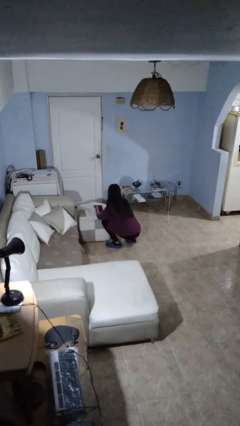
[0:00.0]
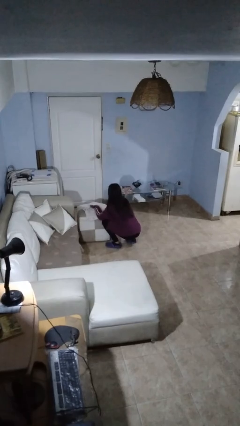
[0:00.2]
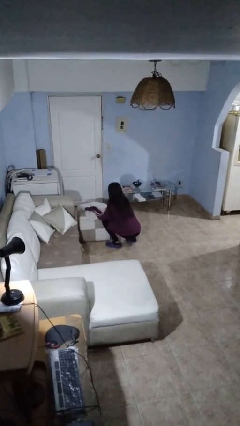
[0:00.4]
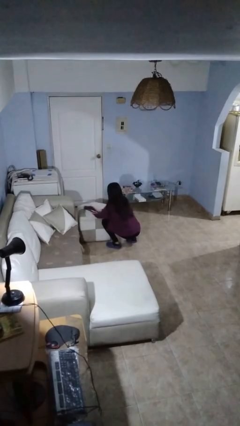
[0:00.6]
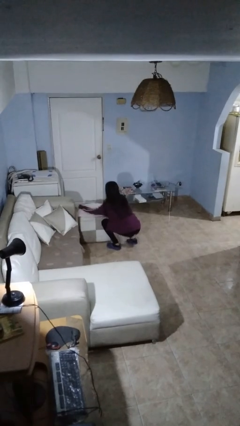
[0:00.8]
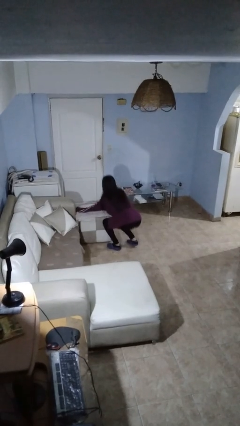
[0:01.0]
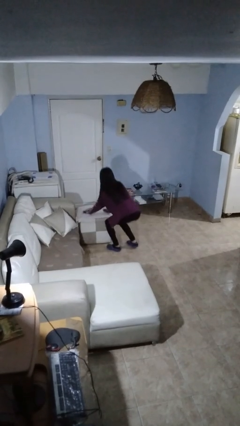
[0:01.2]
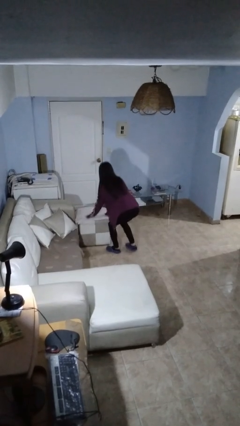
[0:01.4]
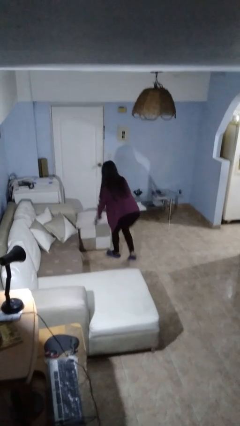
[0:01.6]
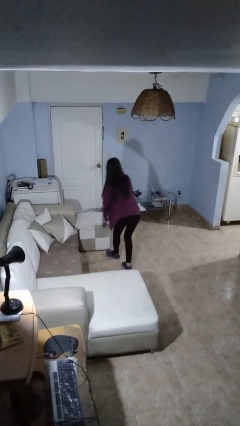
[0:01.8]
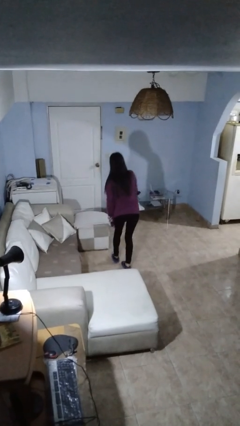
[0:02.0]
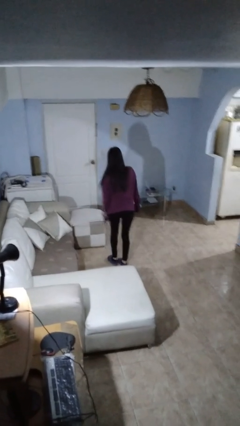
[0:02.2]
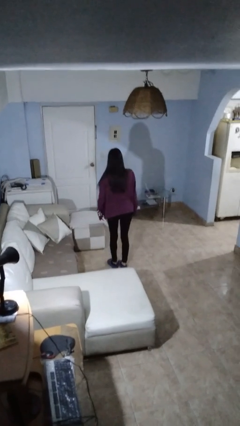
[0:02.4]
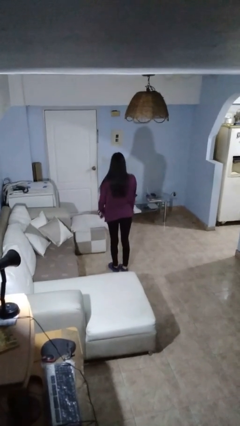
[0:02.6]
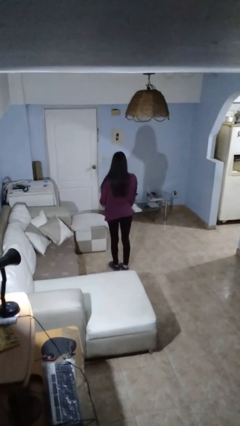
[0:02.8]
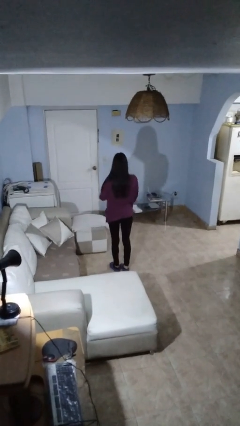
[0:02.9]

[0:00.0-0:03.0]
person stands up from floor

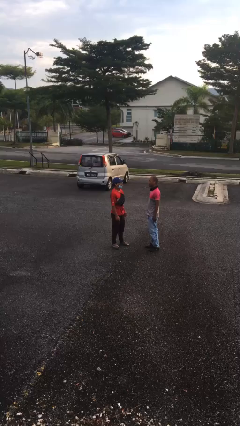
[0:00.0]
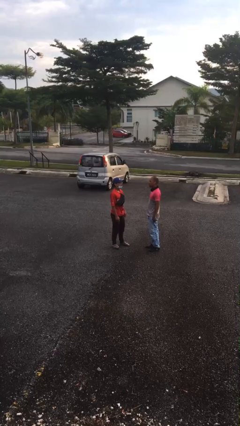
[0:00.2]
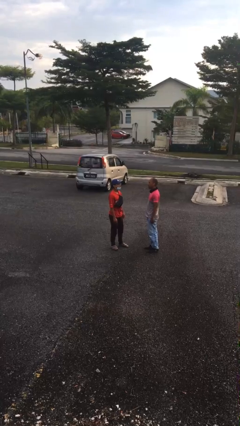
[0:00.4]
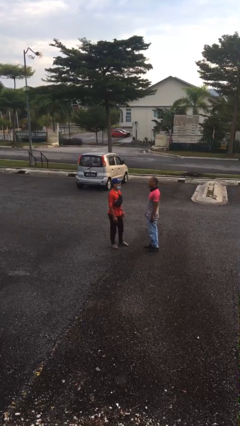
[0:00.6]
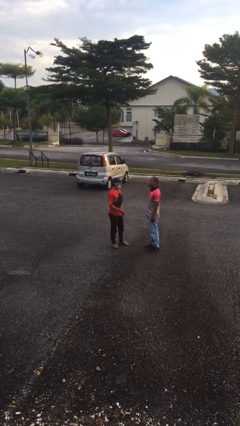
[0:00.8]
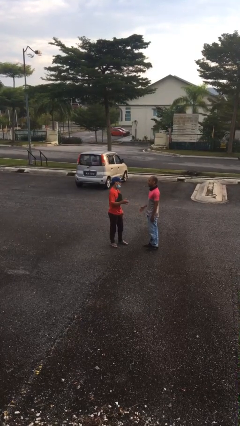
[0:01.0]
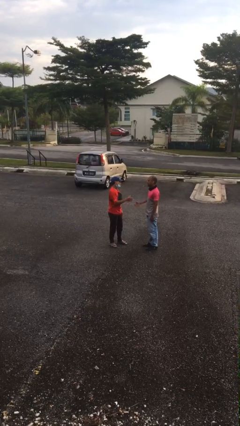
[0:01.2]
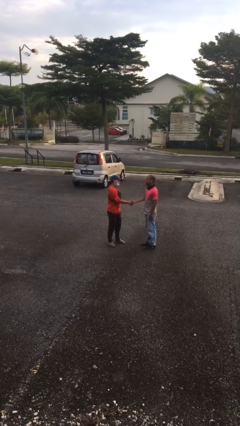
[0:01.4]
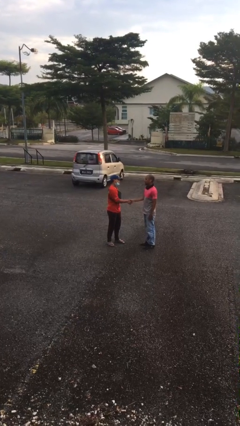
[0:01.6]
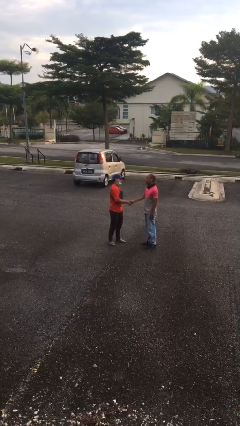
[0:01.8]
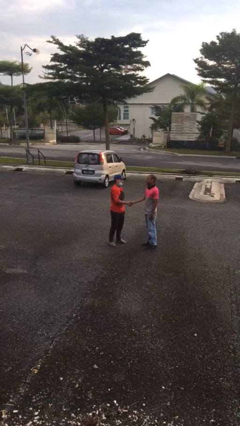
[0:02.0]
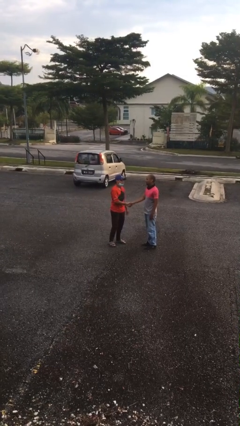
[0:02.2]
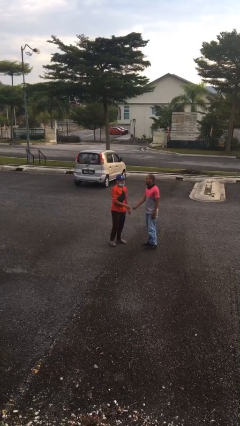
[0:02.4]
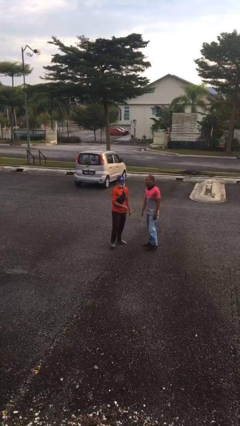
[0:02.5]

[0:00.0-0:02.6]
person shakes hand

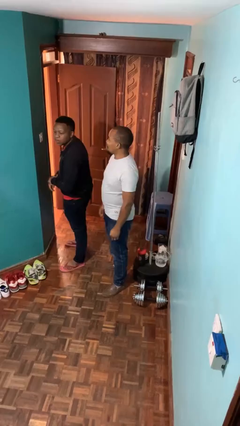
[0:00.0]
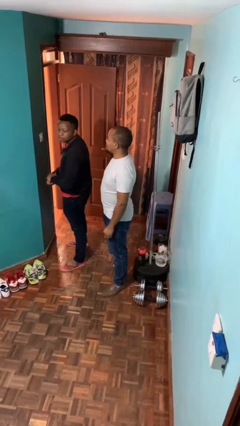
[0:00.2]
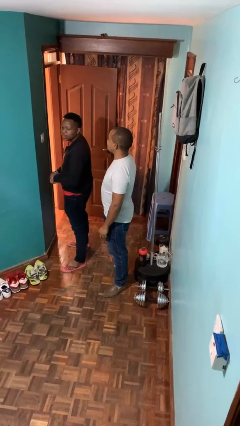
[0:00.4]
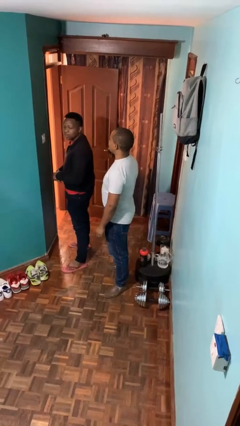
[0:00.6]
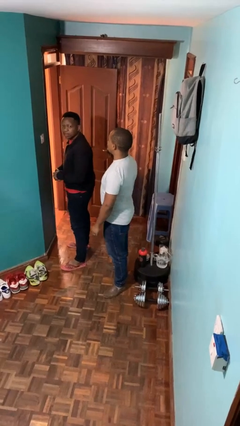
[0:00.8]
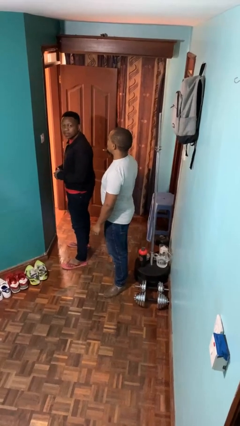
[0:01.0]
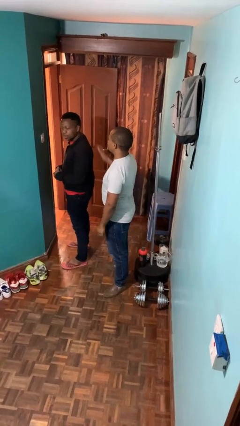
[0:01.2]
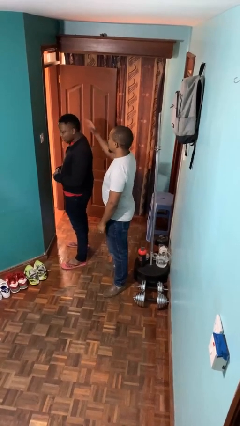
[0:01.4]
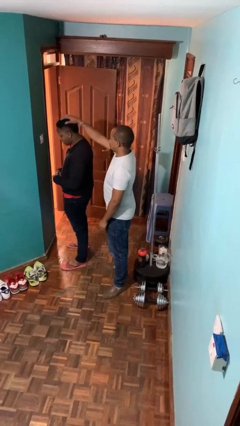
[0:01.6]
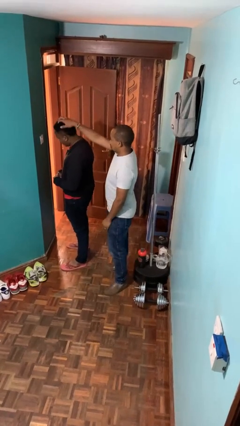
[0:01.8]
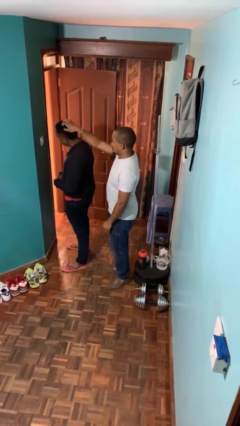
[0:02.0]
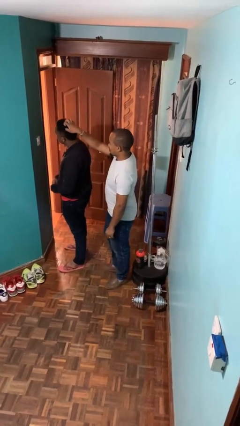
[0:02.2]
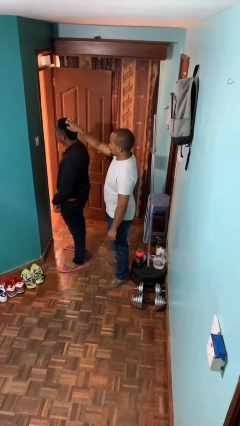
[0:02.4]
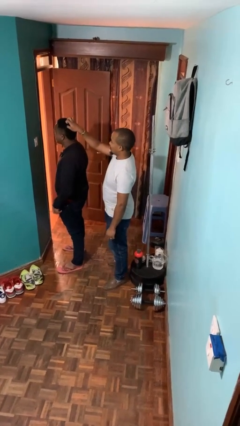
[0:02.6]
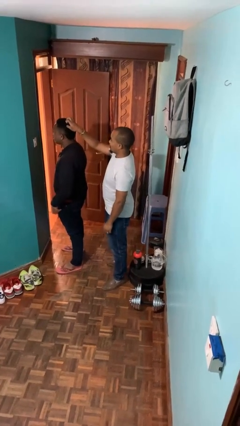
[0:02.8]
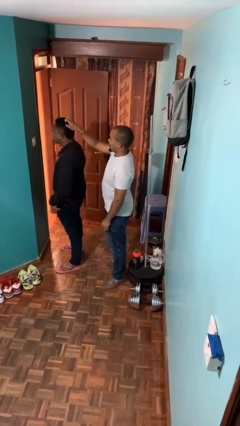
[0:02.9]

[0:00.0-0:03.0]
person grabs person by hair

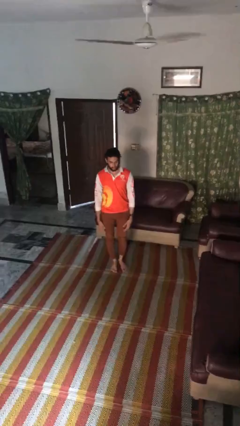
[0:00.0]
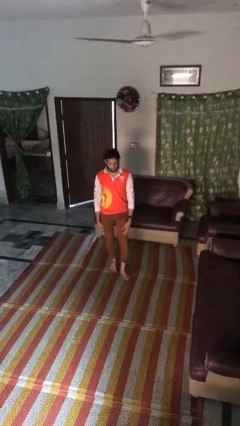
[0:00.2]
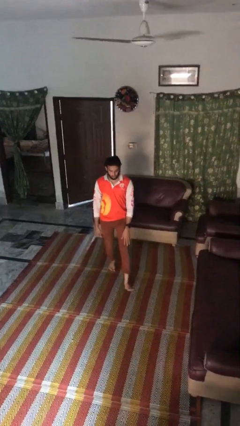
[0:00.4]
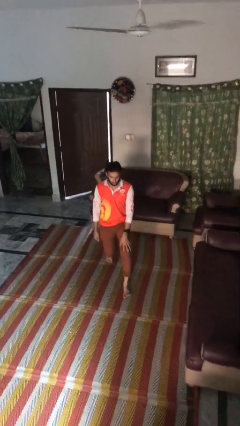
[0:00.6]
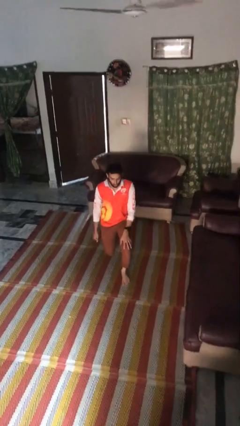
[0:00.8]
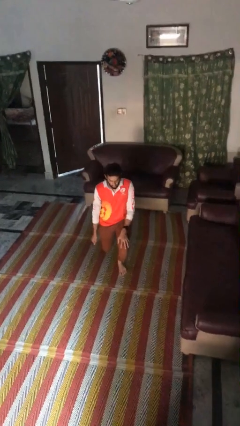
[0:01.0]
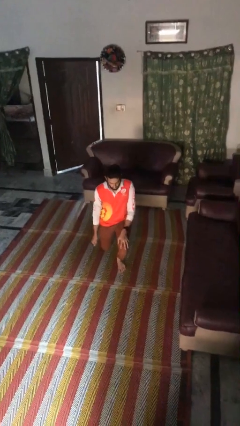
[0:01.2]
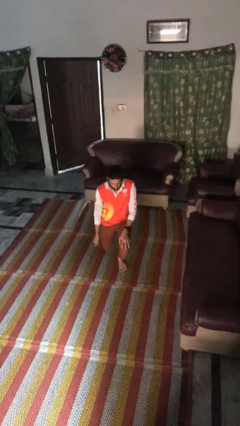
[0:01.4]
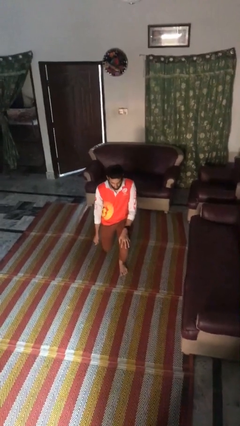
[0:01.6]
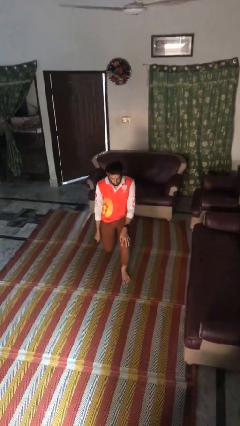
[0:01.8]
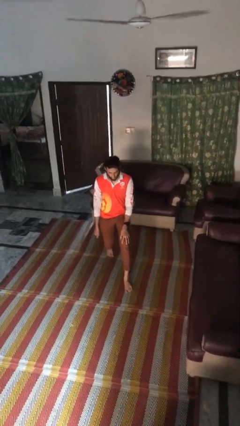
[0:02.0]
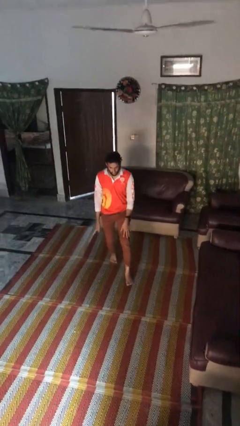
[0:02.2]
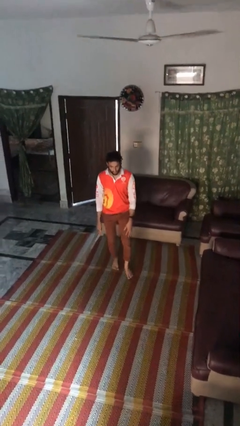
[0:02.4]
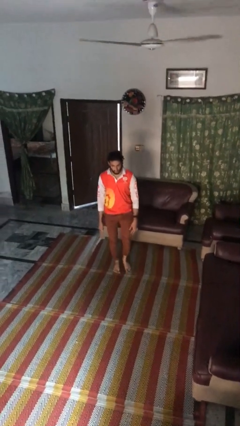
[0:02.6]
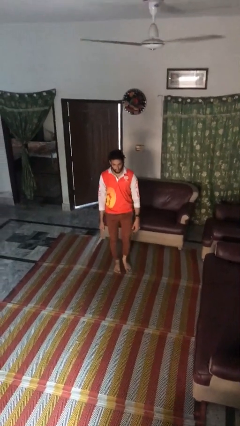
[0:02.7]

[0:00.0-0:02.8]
person exercises with lunges

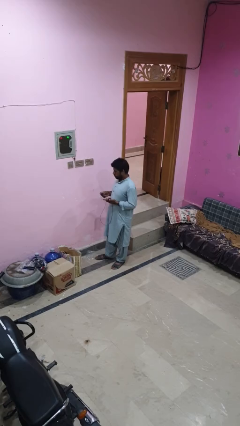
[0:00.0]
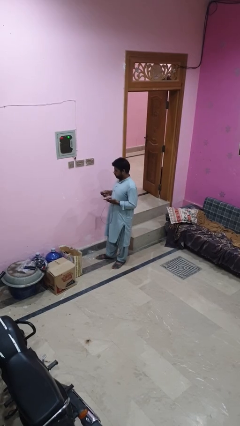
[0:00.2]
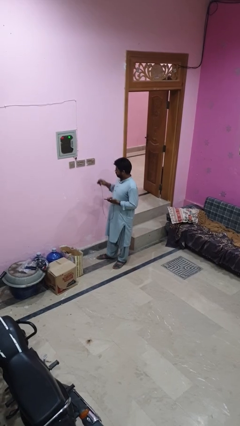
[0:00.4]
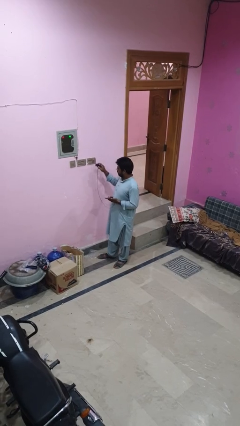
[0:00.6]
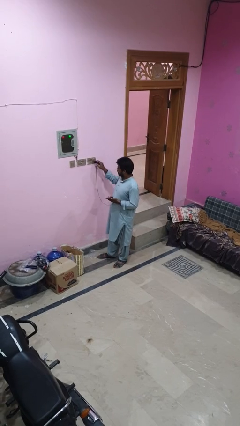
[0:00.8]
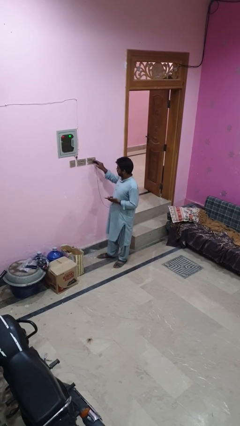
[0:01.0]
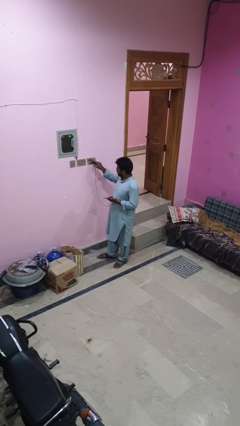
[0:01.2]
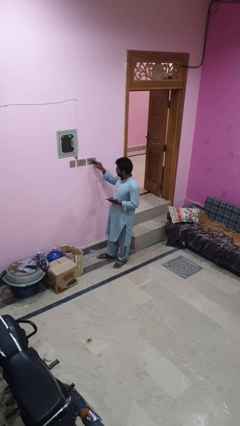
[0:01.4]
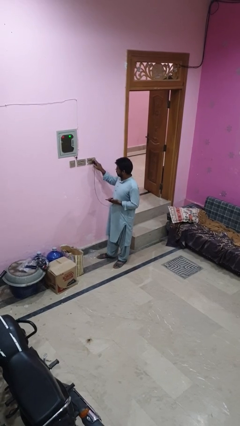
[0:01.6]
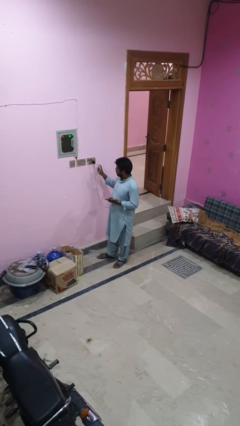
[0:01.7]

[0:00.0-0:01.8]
person plugs into electrical socket

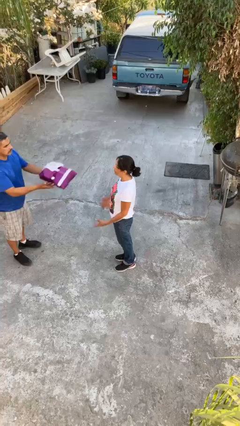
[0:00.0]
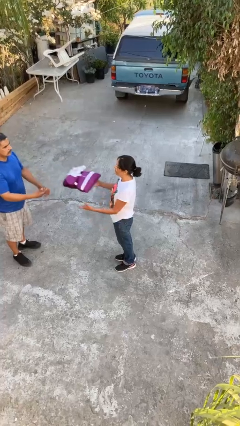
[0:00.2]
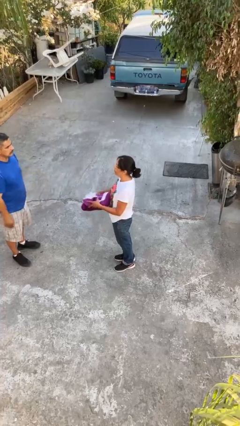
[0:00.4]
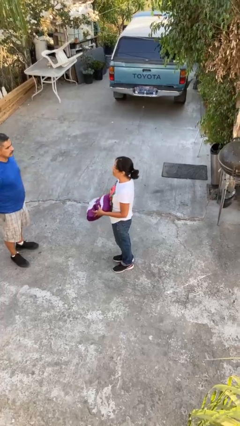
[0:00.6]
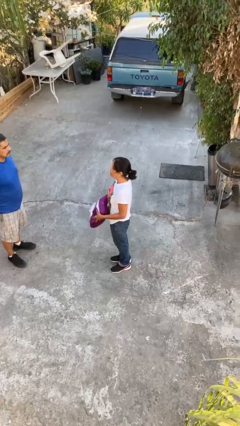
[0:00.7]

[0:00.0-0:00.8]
person catches object from person

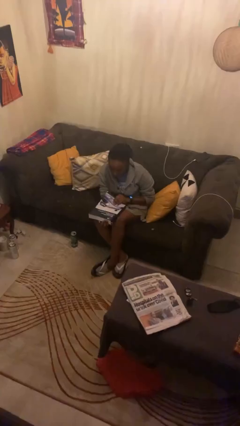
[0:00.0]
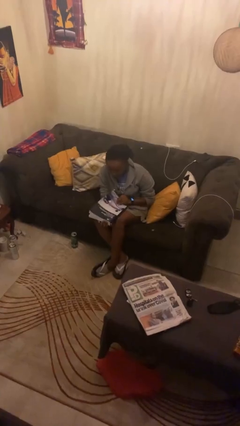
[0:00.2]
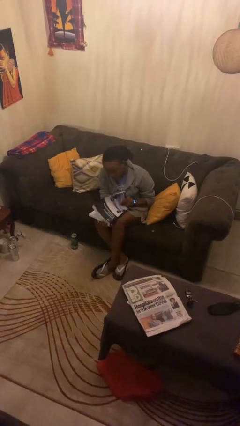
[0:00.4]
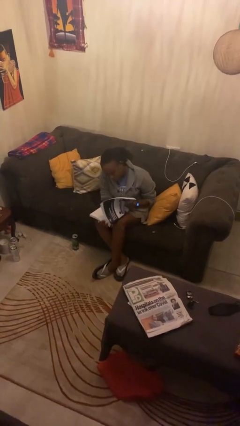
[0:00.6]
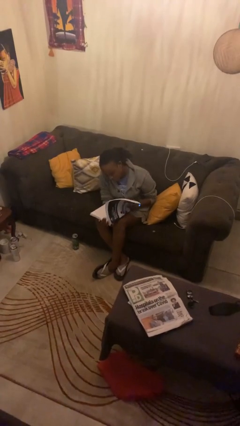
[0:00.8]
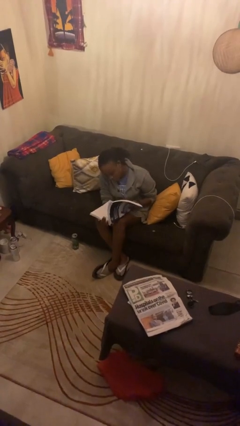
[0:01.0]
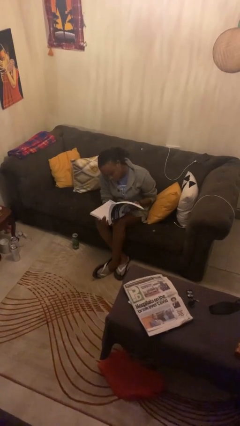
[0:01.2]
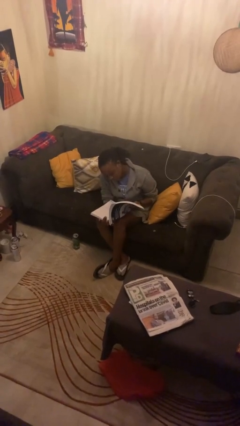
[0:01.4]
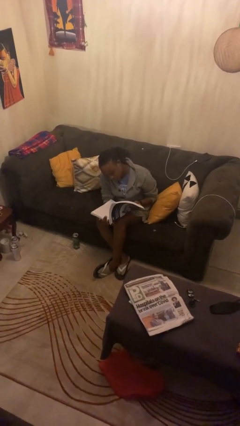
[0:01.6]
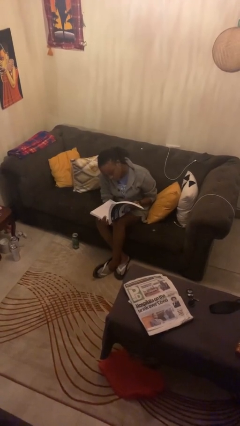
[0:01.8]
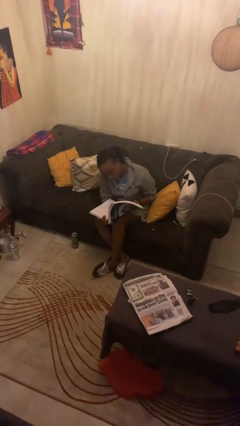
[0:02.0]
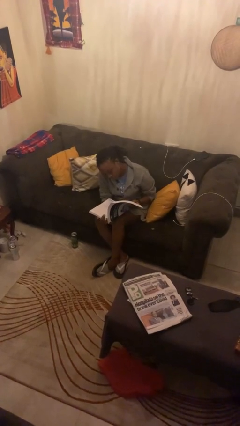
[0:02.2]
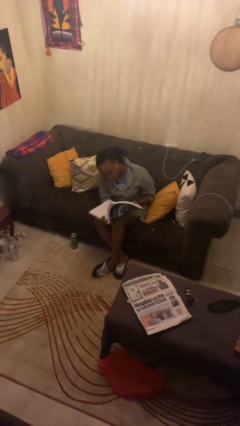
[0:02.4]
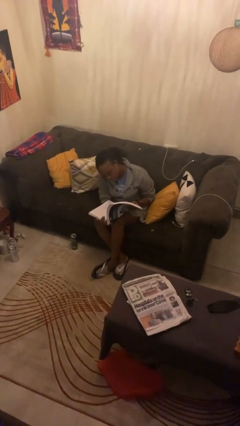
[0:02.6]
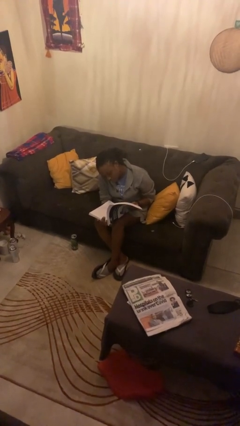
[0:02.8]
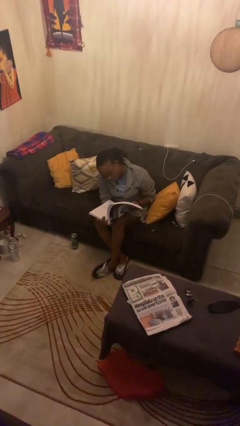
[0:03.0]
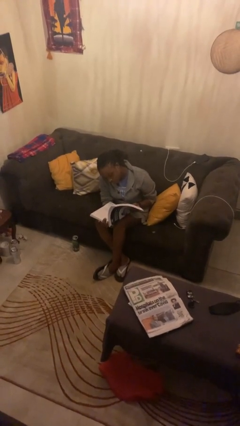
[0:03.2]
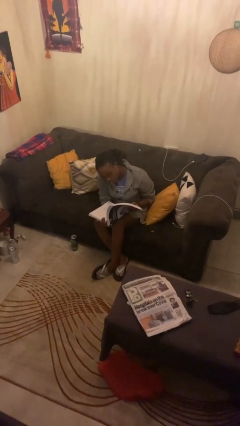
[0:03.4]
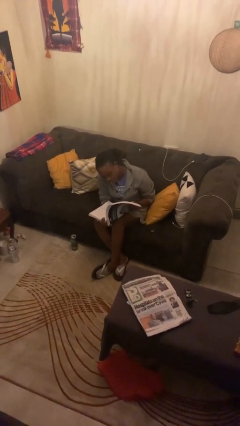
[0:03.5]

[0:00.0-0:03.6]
person reads book
